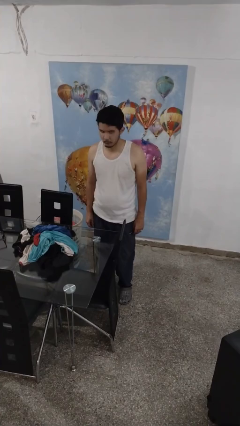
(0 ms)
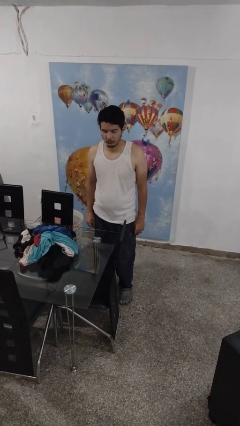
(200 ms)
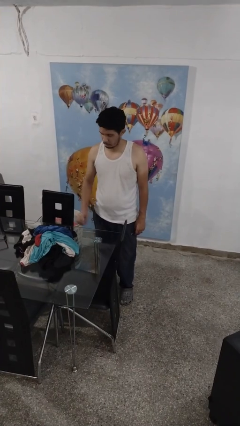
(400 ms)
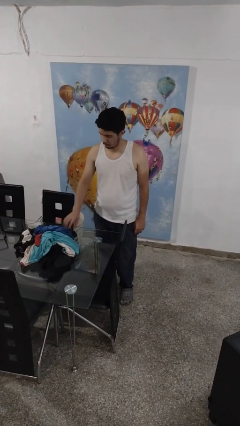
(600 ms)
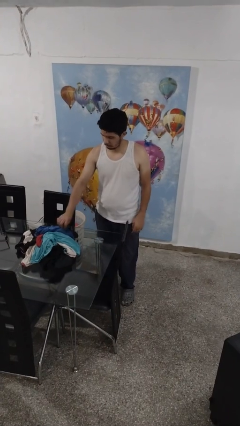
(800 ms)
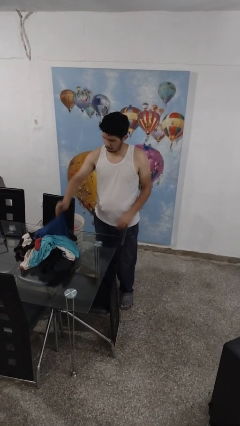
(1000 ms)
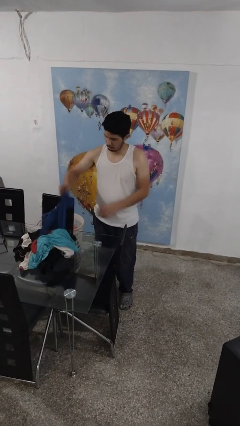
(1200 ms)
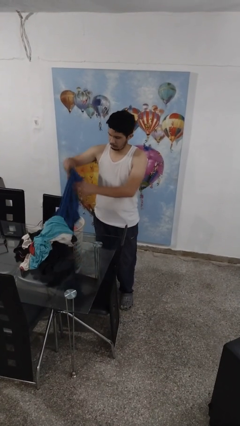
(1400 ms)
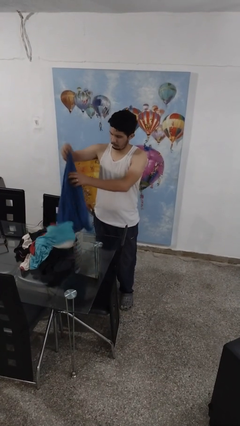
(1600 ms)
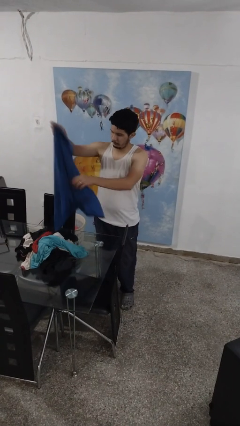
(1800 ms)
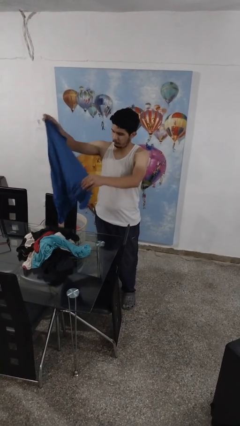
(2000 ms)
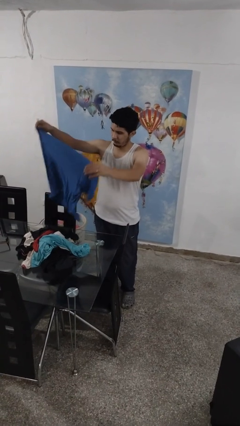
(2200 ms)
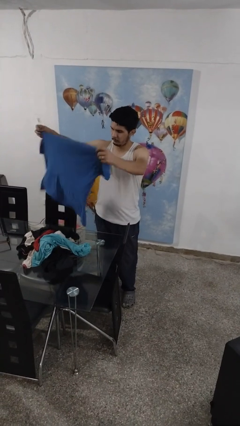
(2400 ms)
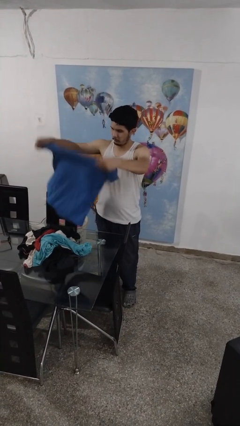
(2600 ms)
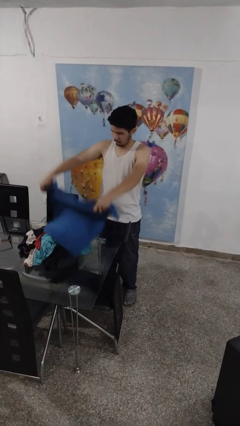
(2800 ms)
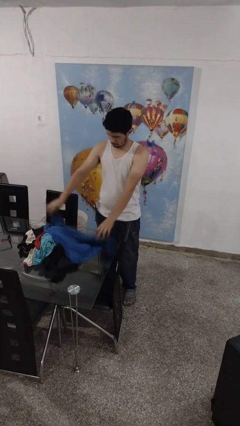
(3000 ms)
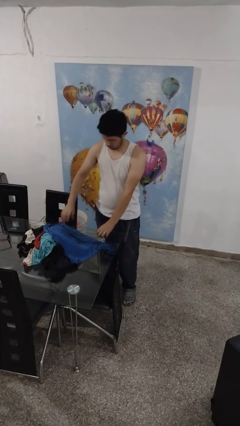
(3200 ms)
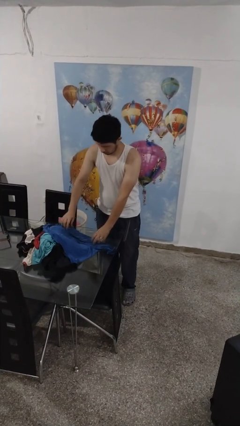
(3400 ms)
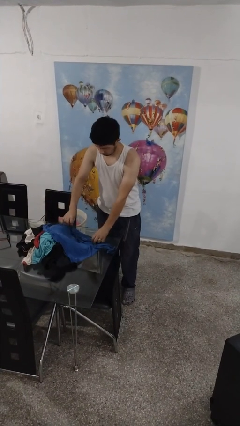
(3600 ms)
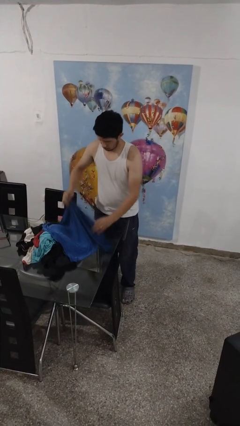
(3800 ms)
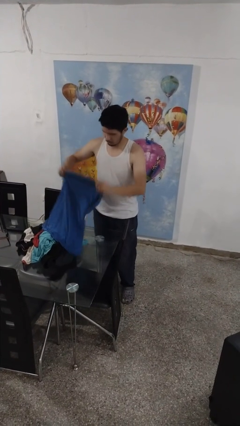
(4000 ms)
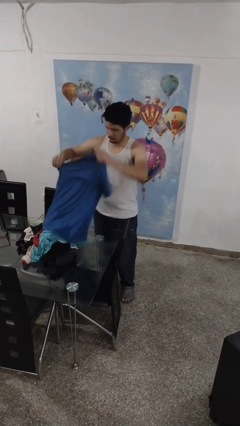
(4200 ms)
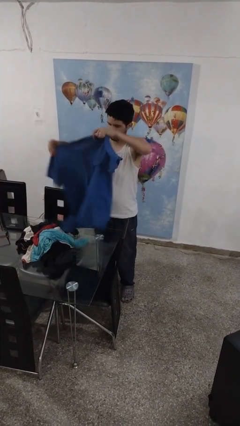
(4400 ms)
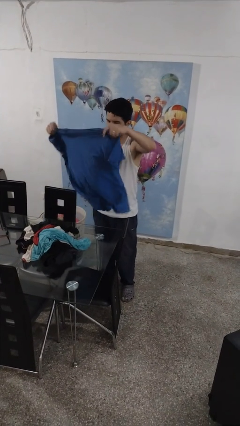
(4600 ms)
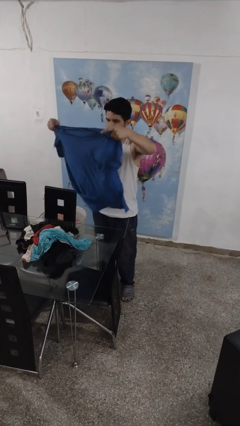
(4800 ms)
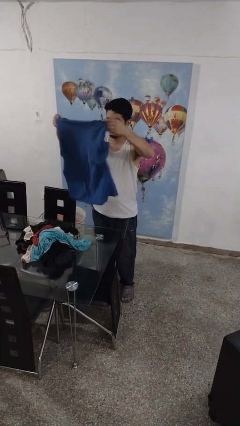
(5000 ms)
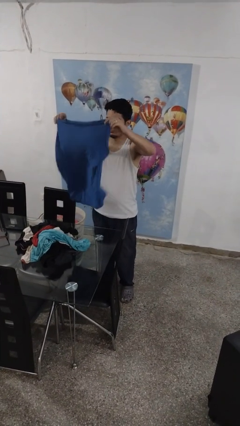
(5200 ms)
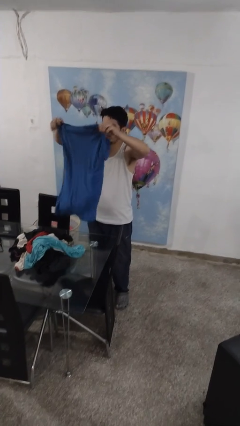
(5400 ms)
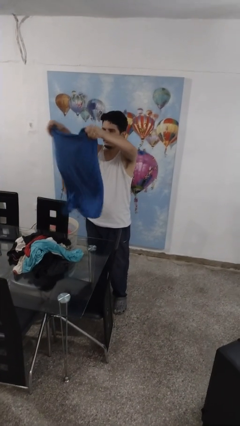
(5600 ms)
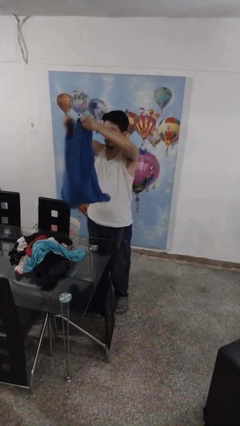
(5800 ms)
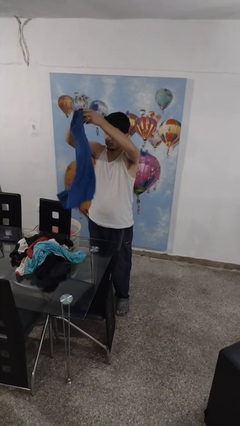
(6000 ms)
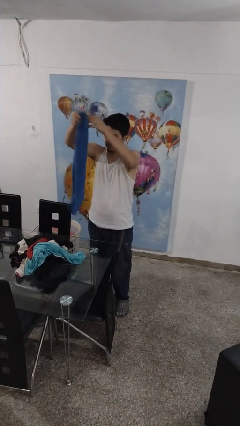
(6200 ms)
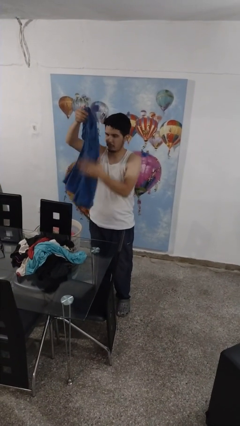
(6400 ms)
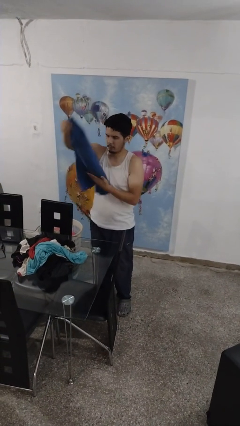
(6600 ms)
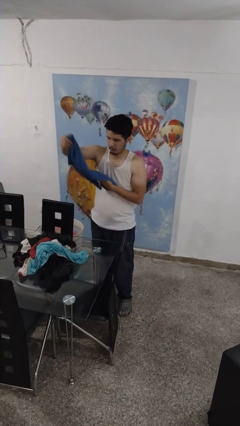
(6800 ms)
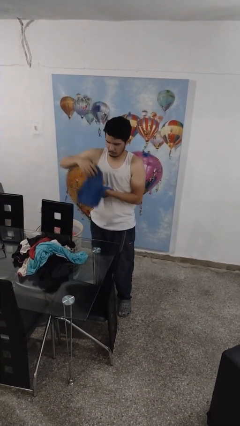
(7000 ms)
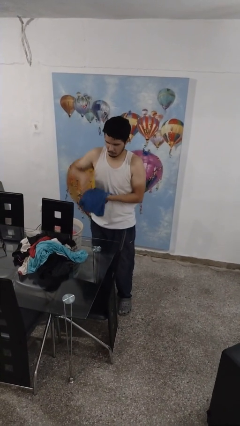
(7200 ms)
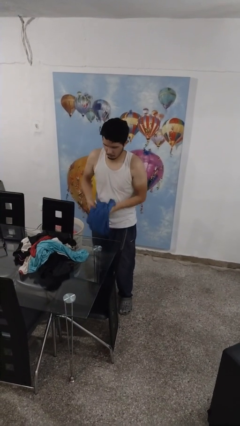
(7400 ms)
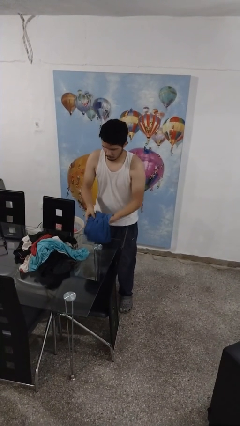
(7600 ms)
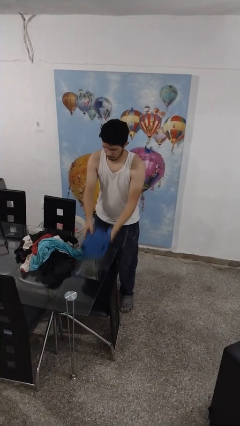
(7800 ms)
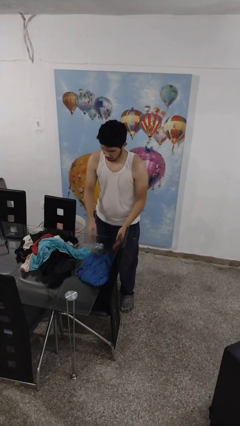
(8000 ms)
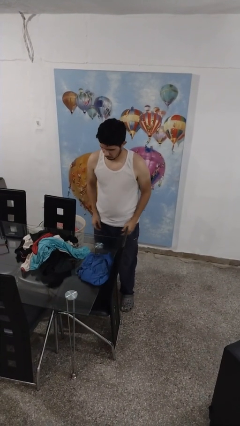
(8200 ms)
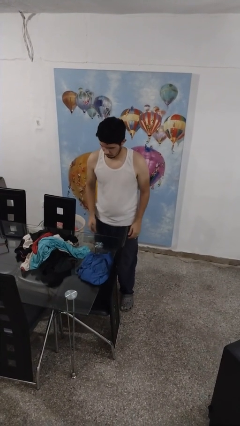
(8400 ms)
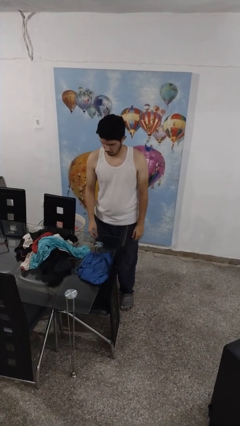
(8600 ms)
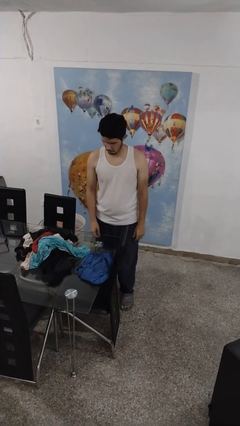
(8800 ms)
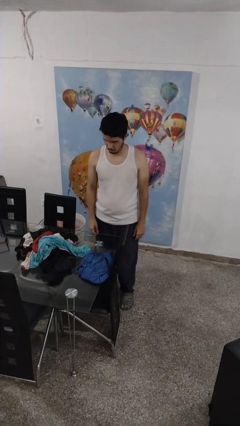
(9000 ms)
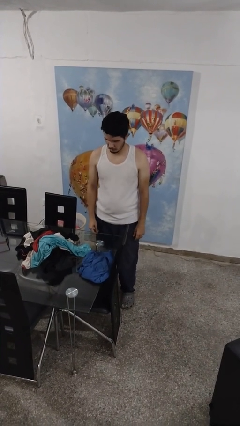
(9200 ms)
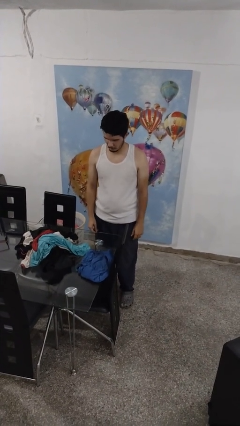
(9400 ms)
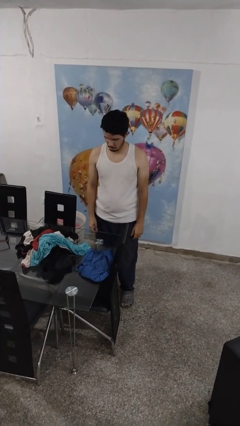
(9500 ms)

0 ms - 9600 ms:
person folds shirt

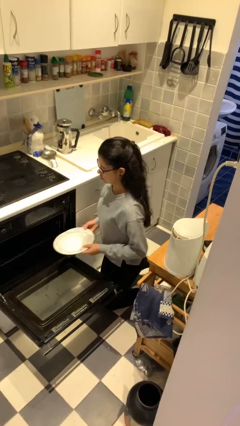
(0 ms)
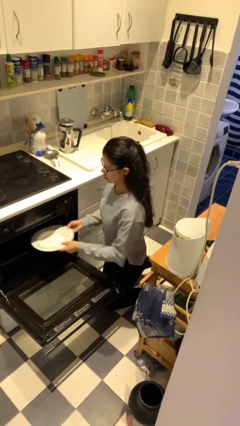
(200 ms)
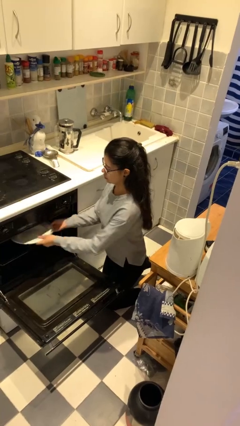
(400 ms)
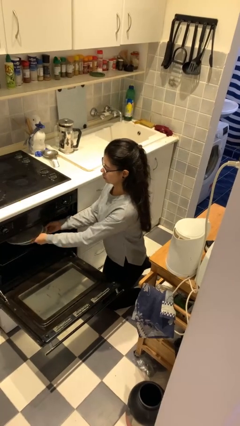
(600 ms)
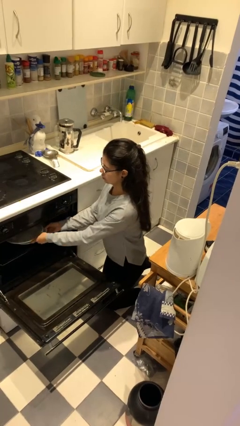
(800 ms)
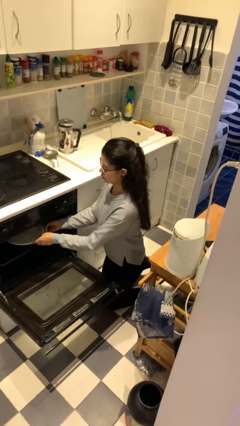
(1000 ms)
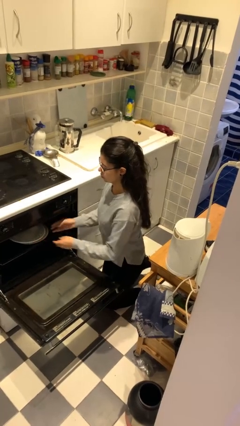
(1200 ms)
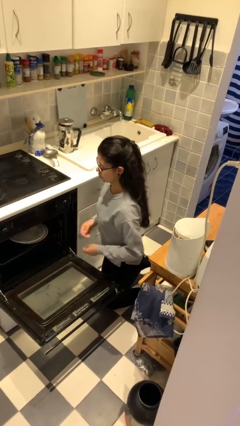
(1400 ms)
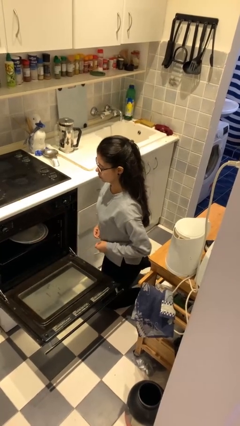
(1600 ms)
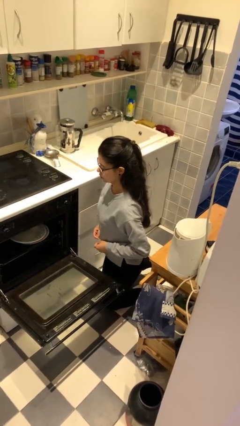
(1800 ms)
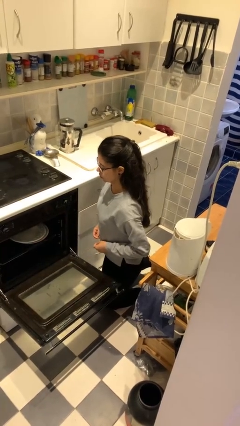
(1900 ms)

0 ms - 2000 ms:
person loads dishwasher

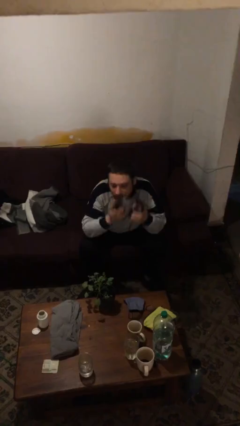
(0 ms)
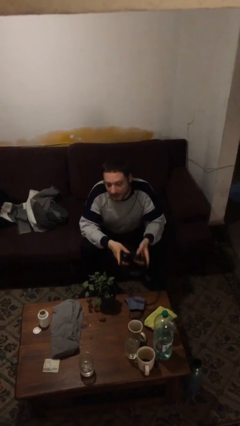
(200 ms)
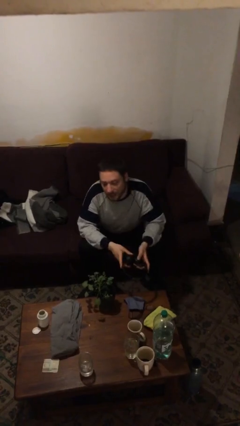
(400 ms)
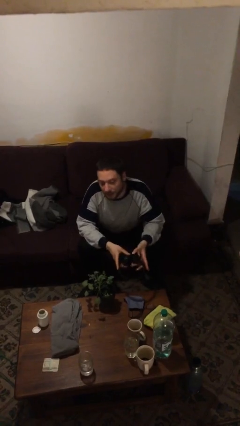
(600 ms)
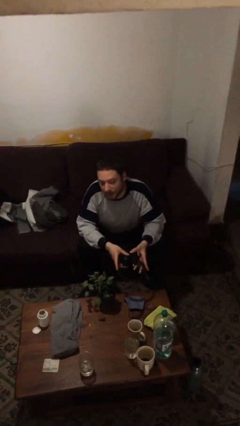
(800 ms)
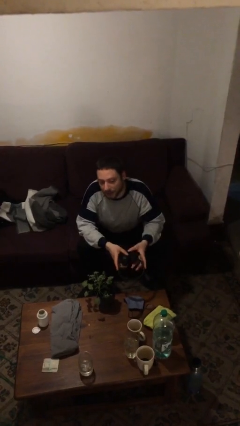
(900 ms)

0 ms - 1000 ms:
person takes off headphones

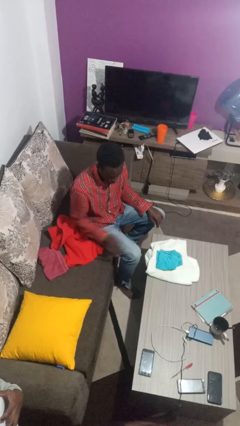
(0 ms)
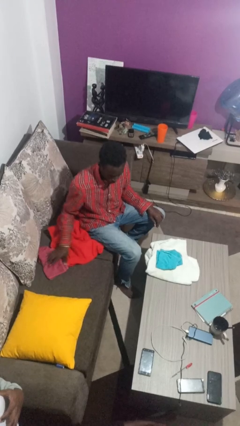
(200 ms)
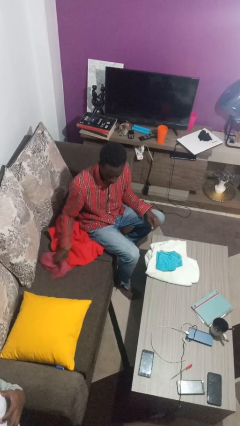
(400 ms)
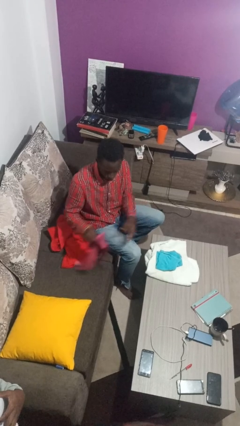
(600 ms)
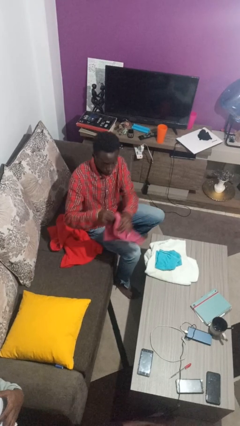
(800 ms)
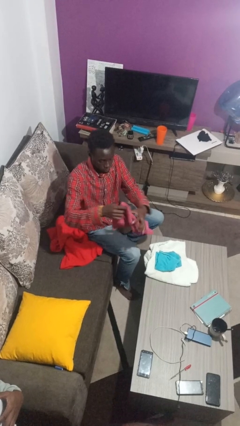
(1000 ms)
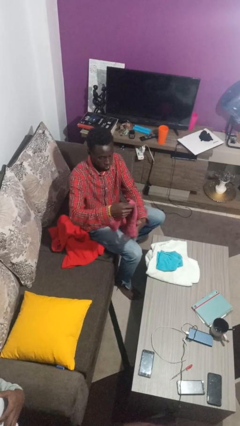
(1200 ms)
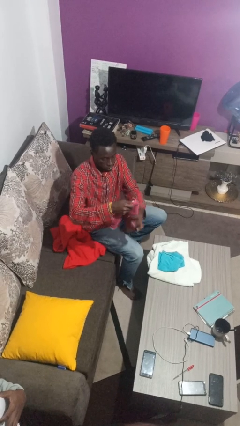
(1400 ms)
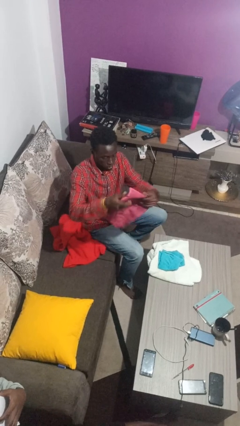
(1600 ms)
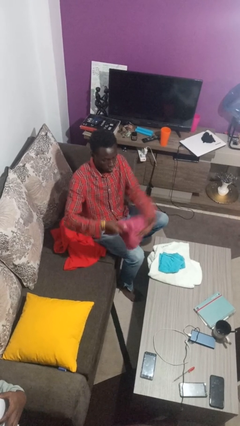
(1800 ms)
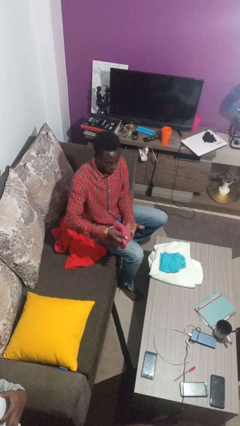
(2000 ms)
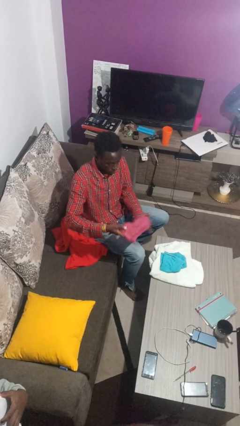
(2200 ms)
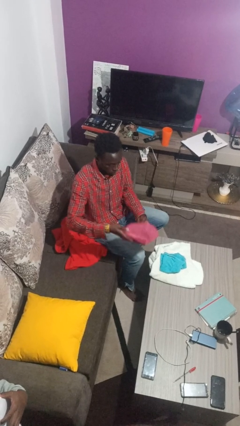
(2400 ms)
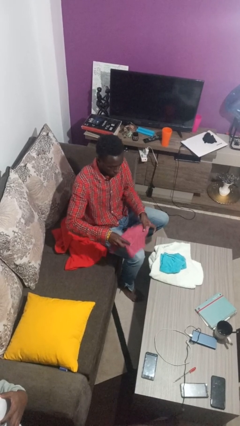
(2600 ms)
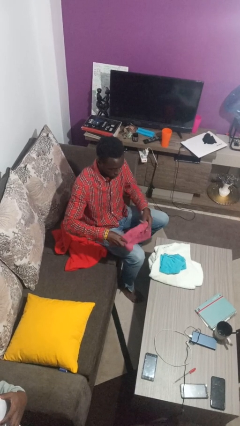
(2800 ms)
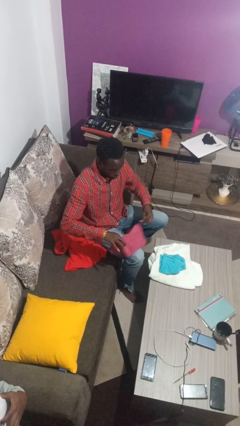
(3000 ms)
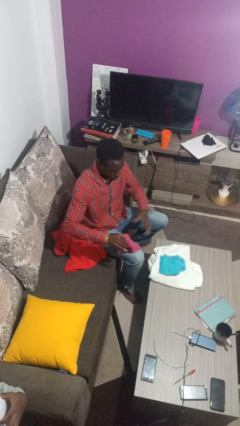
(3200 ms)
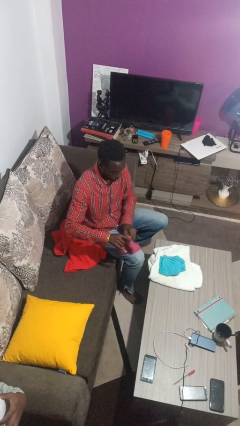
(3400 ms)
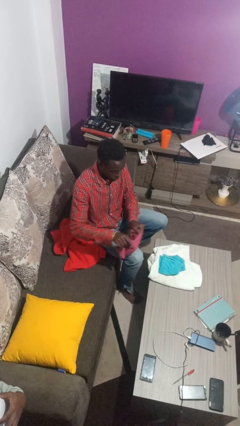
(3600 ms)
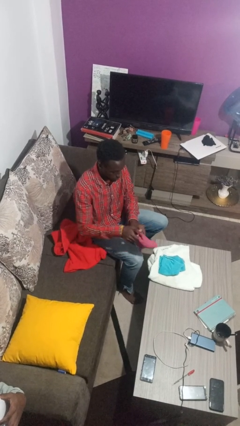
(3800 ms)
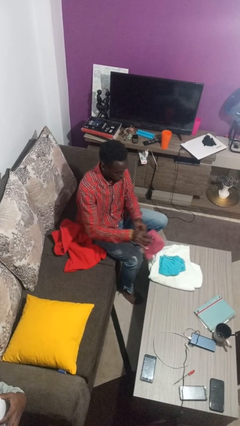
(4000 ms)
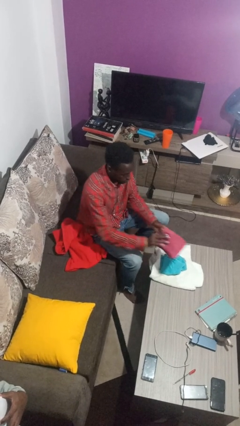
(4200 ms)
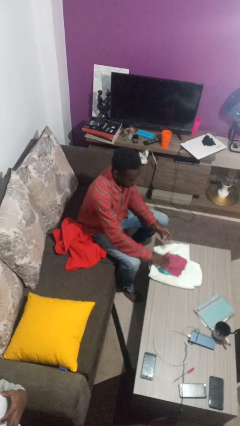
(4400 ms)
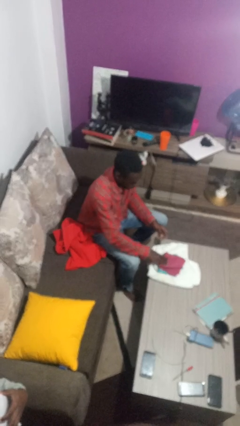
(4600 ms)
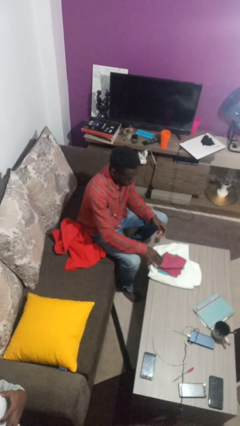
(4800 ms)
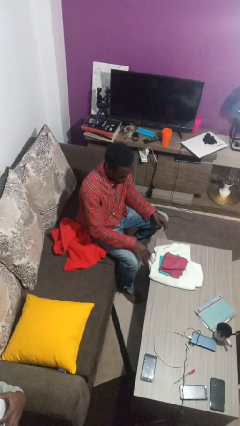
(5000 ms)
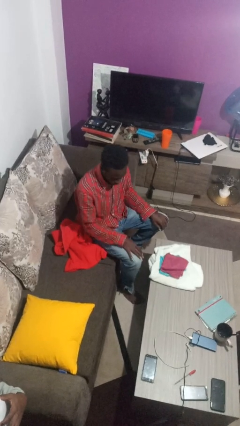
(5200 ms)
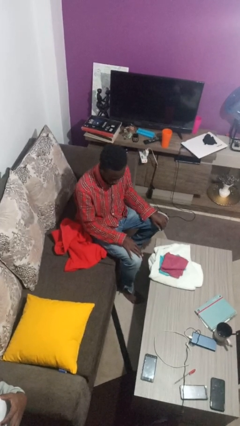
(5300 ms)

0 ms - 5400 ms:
person folds towel
